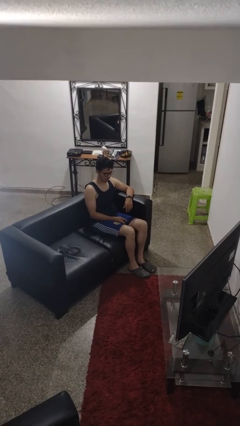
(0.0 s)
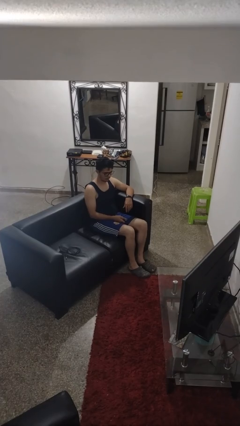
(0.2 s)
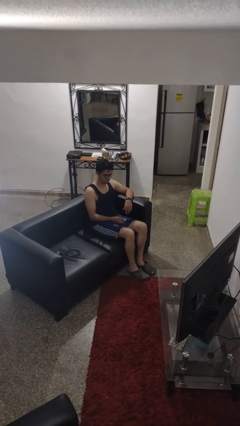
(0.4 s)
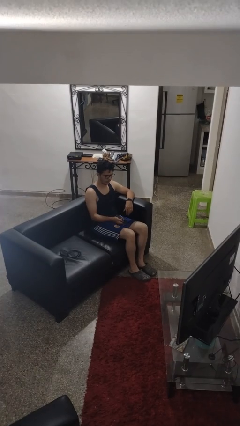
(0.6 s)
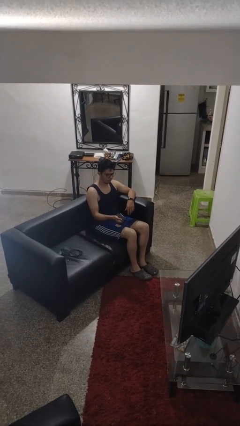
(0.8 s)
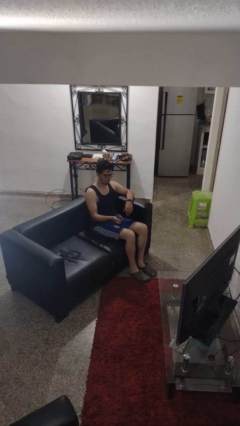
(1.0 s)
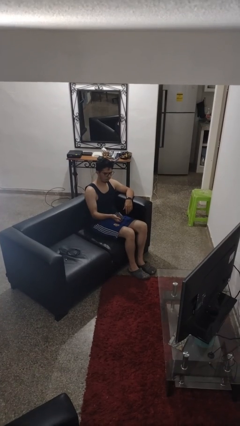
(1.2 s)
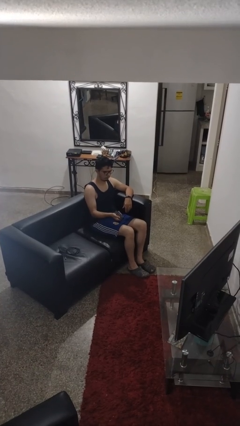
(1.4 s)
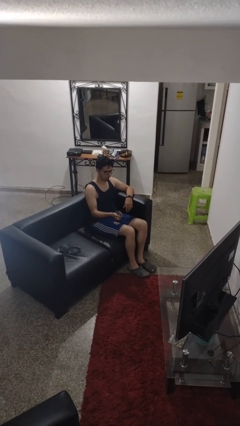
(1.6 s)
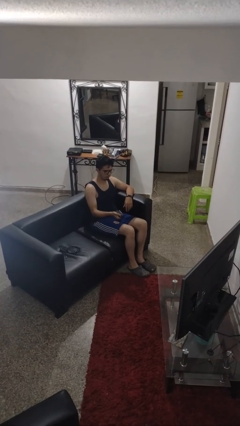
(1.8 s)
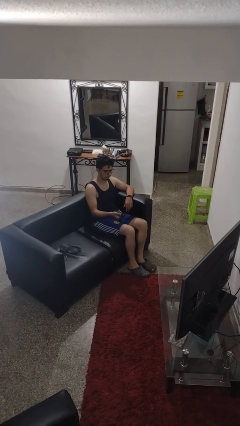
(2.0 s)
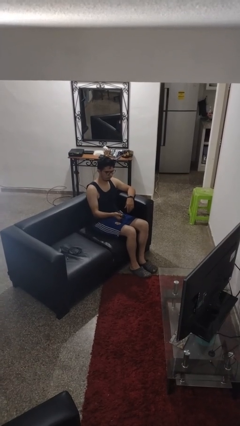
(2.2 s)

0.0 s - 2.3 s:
person uses television remote

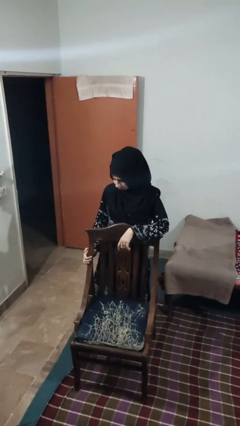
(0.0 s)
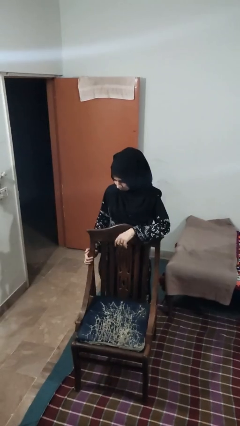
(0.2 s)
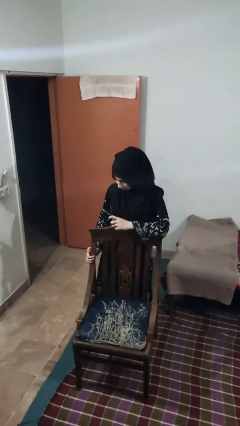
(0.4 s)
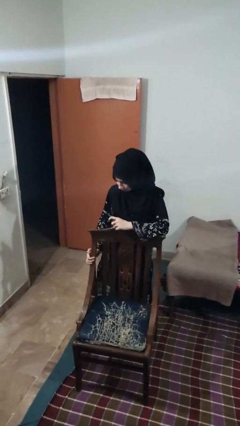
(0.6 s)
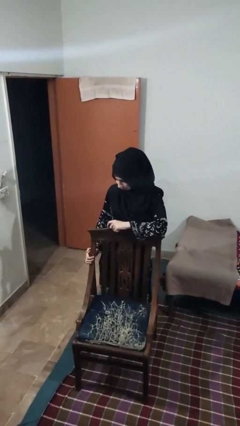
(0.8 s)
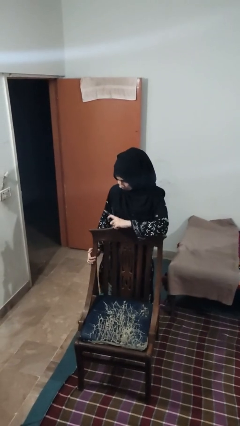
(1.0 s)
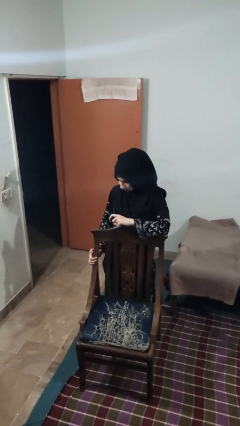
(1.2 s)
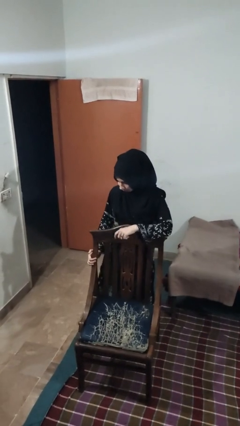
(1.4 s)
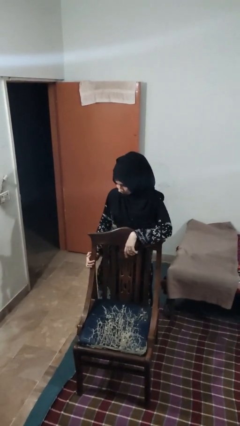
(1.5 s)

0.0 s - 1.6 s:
person taps object with finger

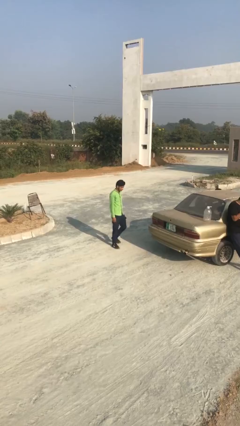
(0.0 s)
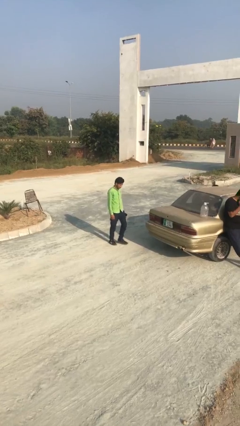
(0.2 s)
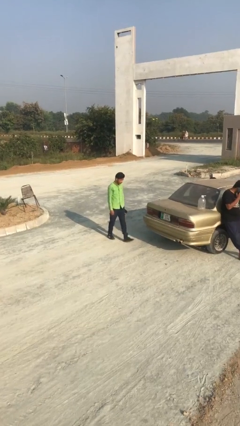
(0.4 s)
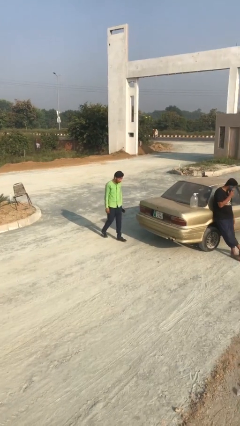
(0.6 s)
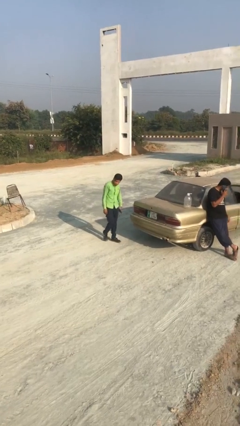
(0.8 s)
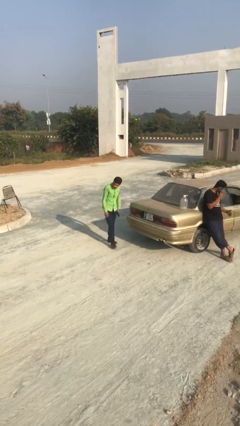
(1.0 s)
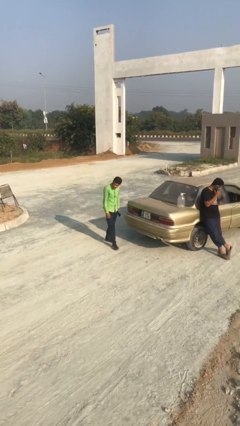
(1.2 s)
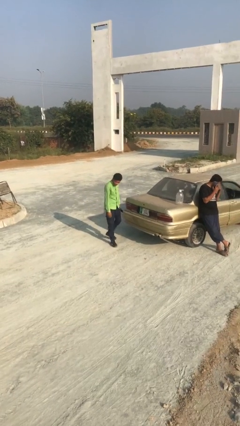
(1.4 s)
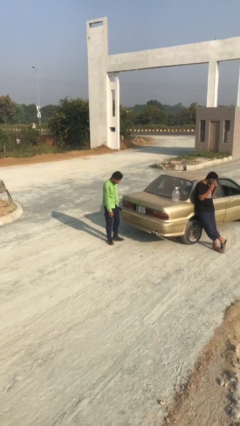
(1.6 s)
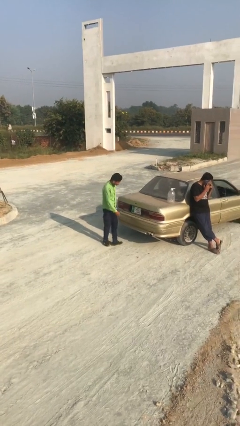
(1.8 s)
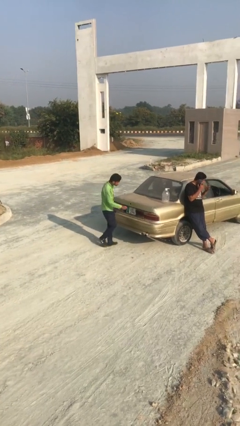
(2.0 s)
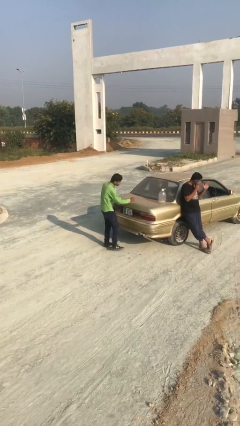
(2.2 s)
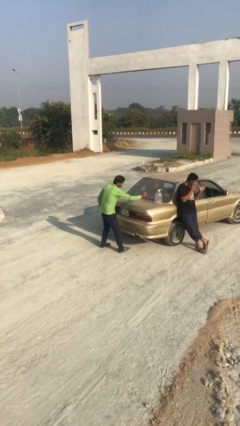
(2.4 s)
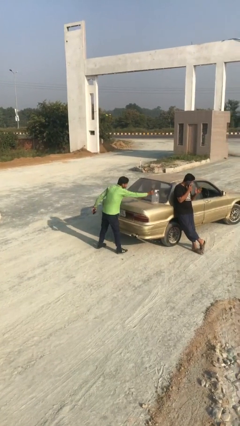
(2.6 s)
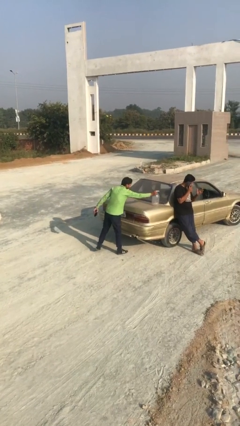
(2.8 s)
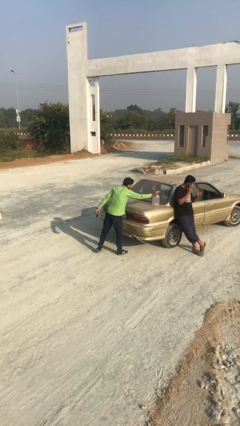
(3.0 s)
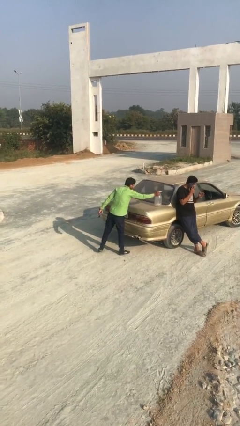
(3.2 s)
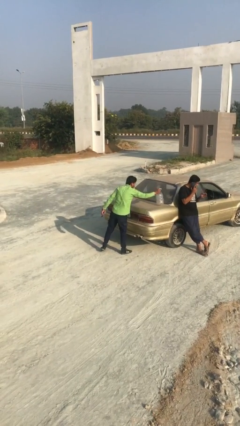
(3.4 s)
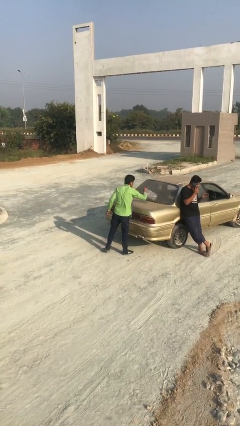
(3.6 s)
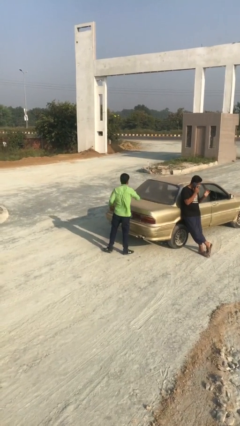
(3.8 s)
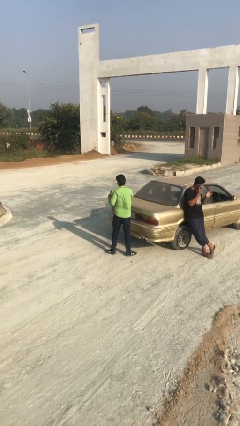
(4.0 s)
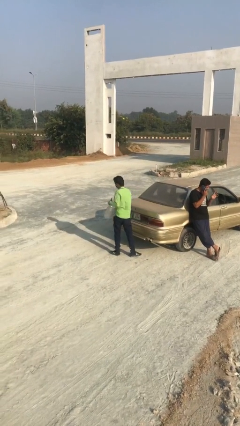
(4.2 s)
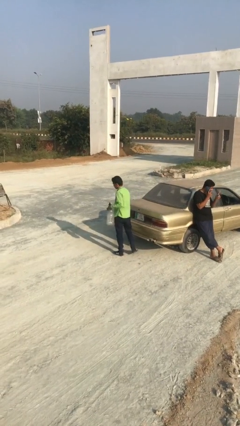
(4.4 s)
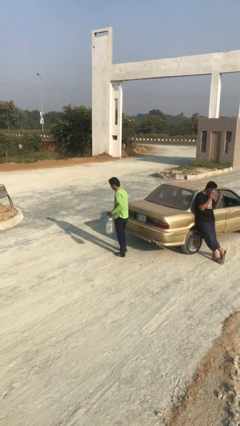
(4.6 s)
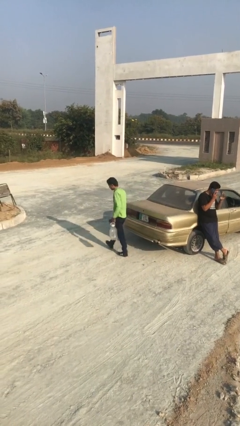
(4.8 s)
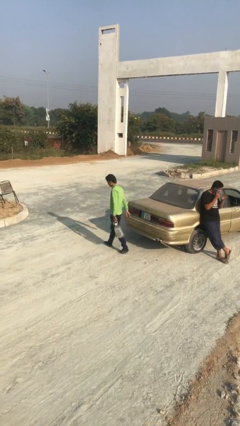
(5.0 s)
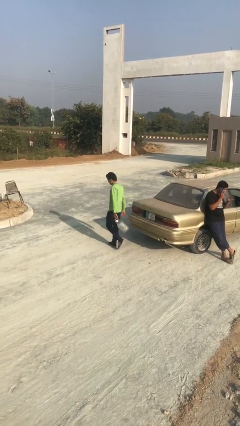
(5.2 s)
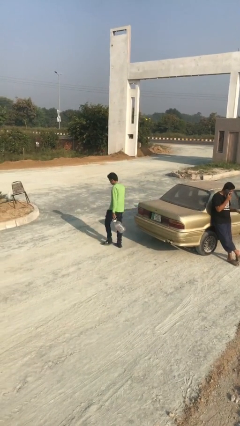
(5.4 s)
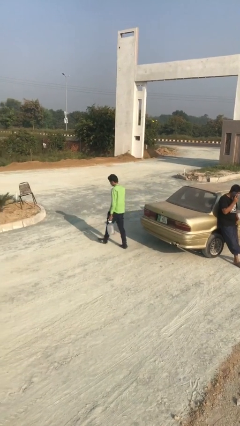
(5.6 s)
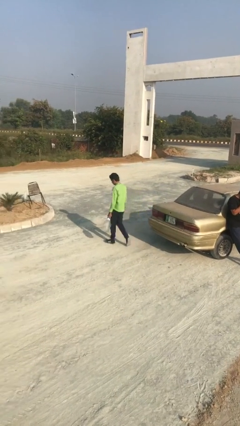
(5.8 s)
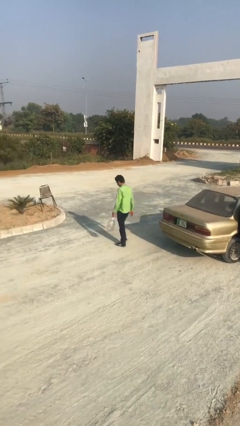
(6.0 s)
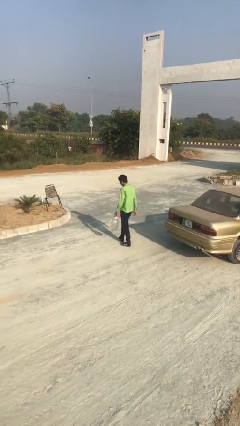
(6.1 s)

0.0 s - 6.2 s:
person steals object from person

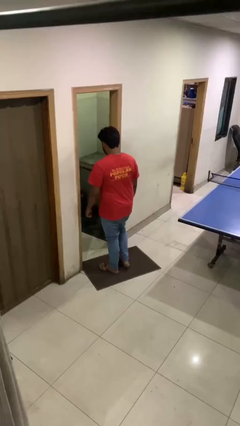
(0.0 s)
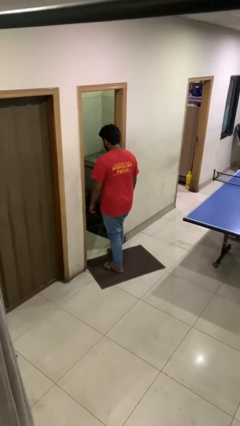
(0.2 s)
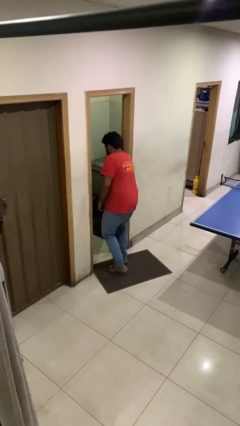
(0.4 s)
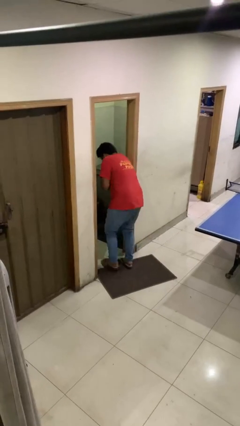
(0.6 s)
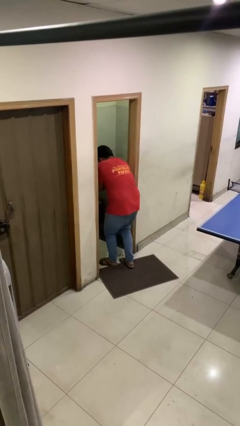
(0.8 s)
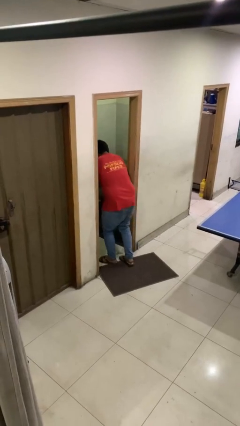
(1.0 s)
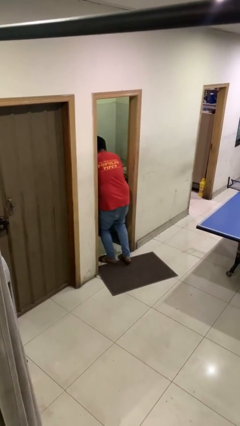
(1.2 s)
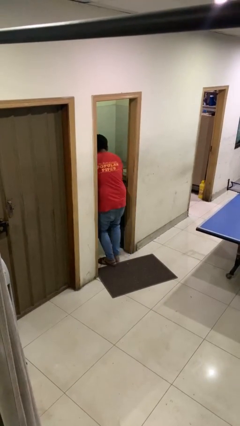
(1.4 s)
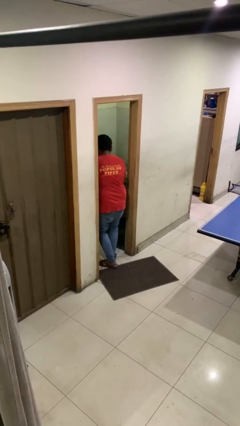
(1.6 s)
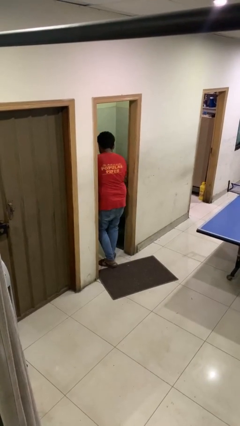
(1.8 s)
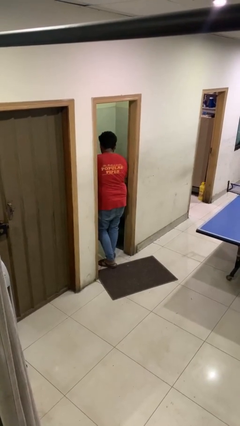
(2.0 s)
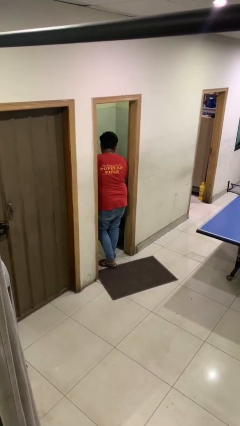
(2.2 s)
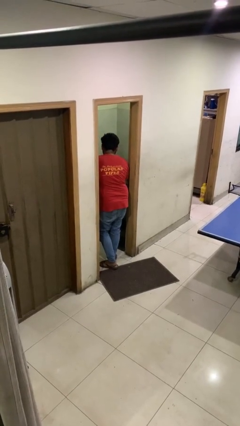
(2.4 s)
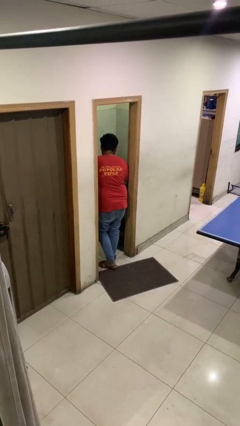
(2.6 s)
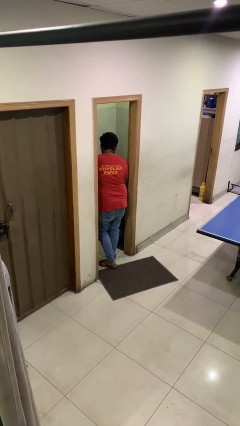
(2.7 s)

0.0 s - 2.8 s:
person bumps into wall

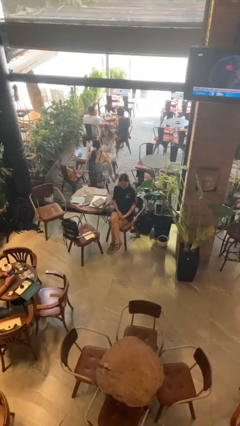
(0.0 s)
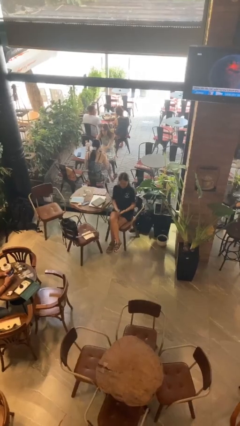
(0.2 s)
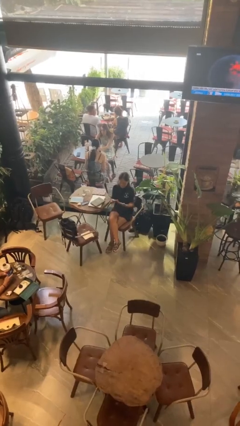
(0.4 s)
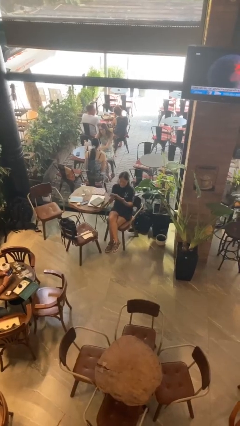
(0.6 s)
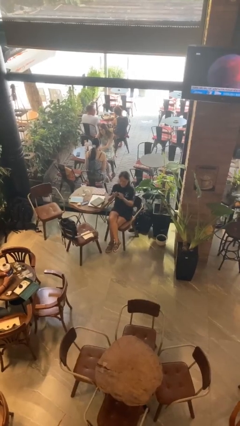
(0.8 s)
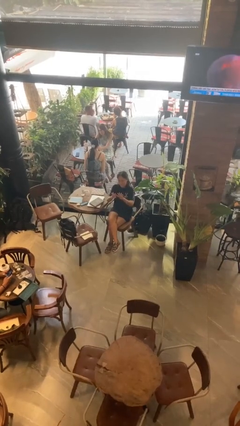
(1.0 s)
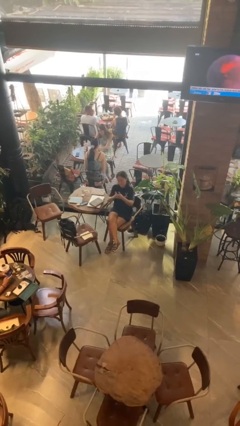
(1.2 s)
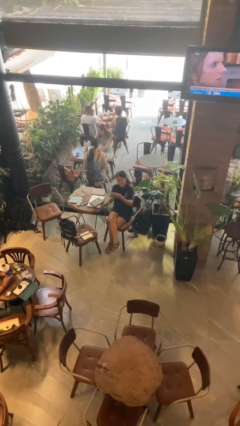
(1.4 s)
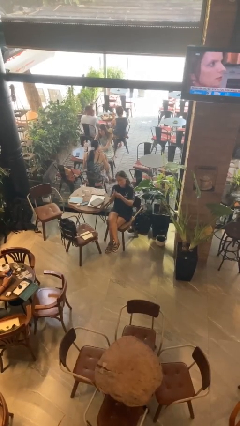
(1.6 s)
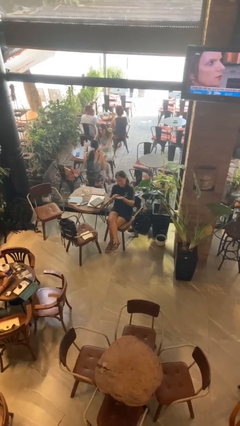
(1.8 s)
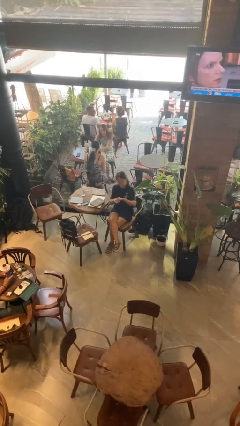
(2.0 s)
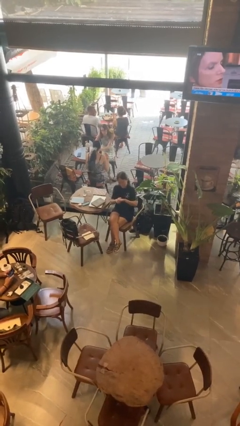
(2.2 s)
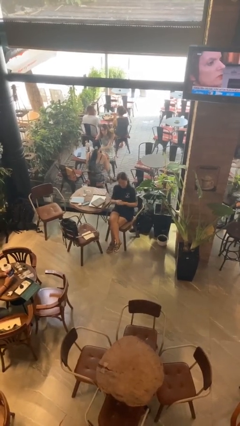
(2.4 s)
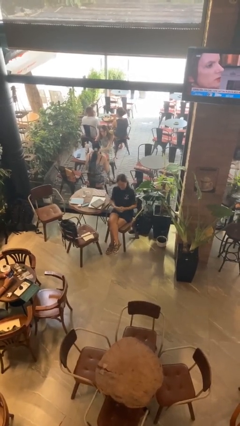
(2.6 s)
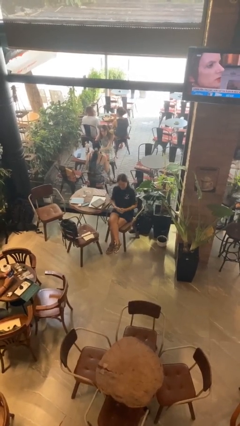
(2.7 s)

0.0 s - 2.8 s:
person looks at hands in lap

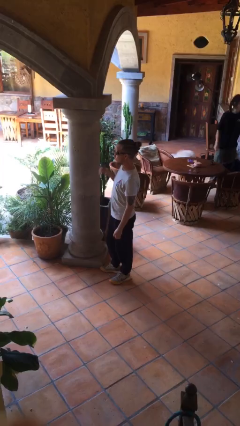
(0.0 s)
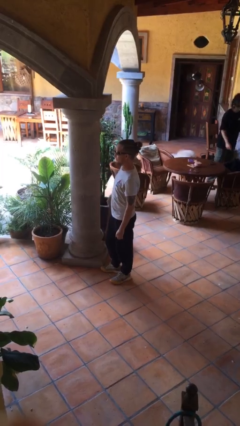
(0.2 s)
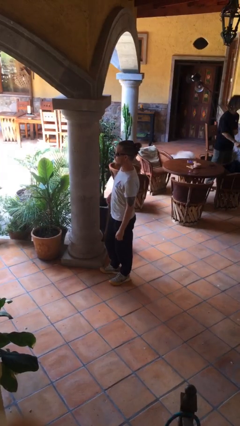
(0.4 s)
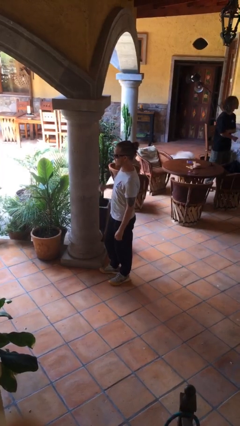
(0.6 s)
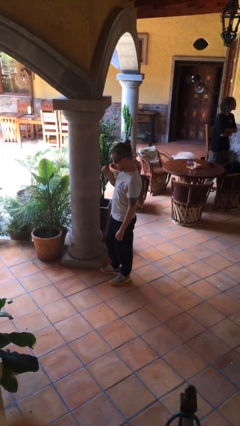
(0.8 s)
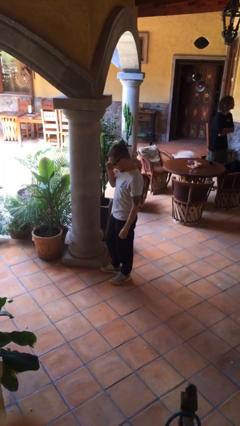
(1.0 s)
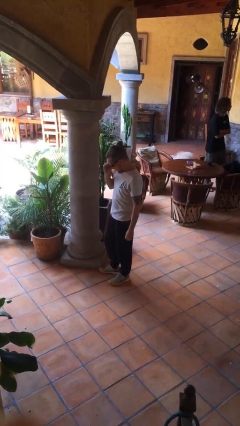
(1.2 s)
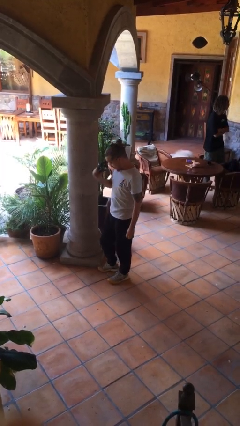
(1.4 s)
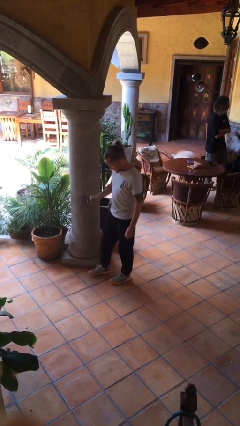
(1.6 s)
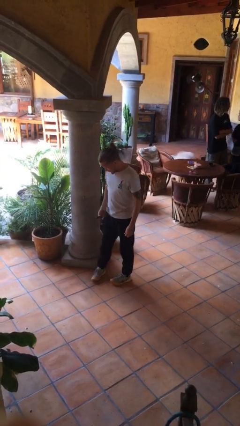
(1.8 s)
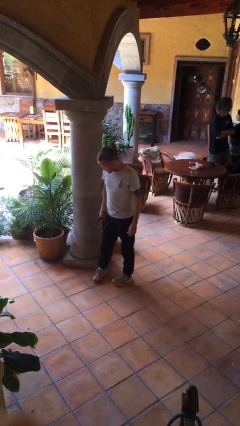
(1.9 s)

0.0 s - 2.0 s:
person takes off sunglasses
